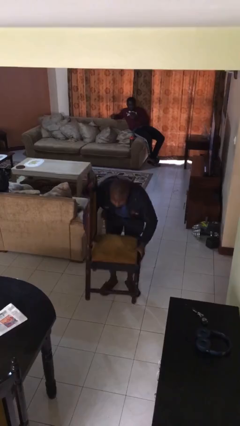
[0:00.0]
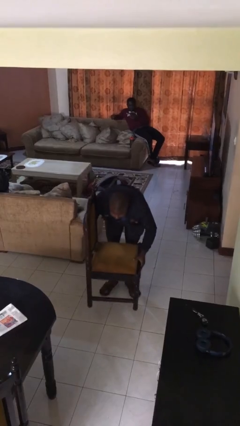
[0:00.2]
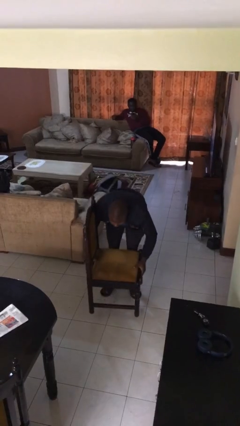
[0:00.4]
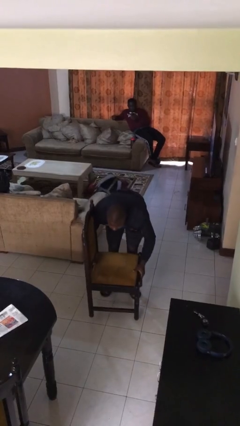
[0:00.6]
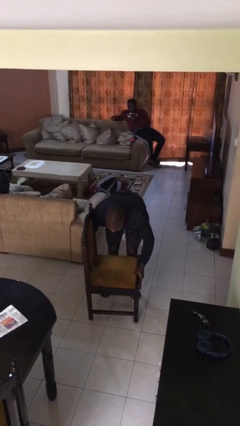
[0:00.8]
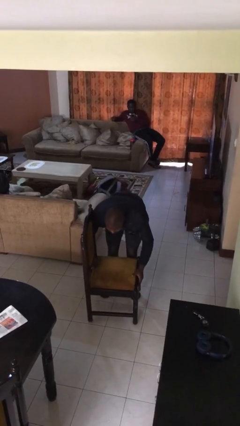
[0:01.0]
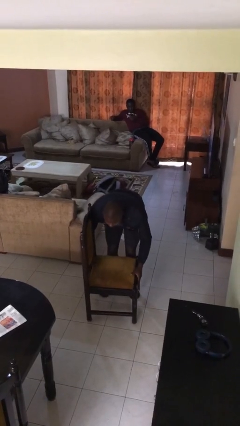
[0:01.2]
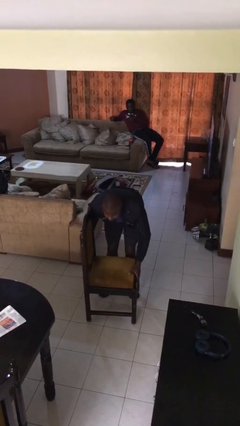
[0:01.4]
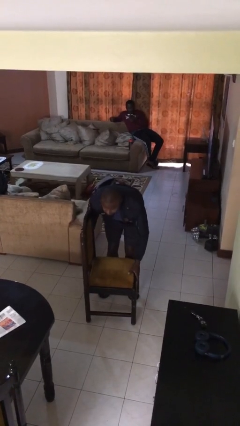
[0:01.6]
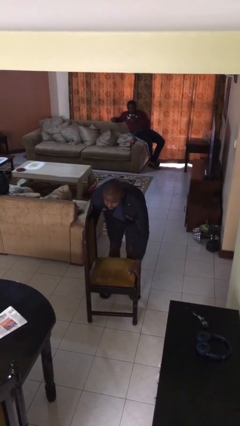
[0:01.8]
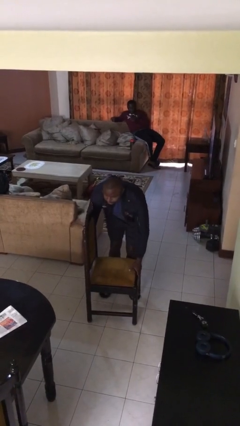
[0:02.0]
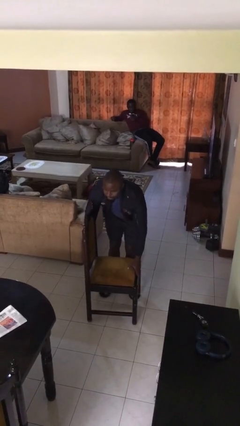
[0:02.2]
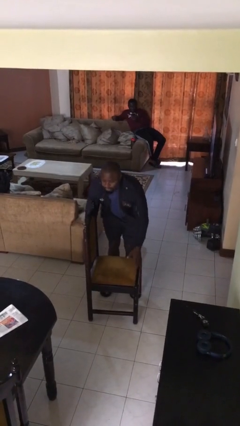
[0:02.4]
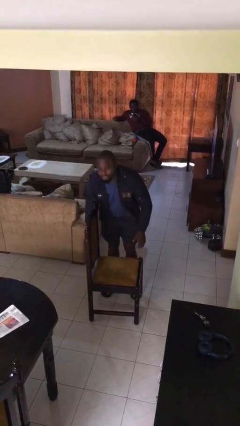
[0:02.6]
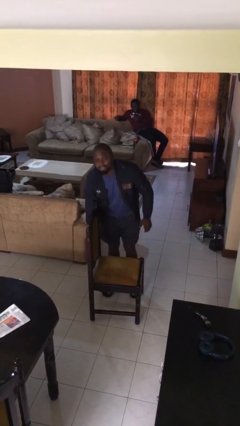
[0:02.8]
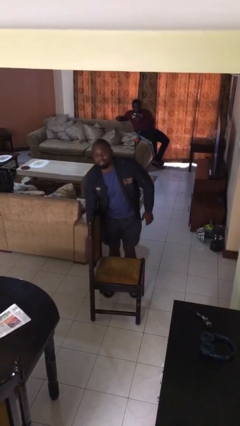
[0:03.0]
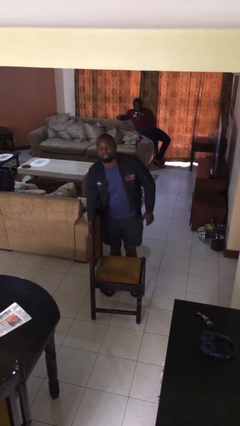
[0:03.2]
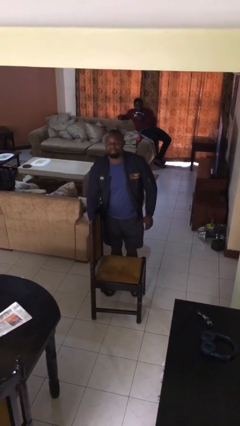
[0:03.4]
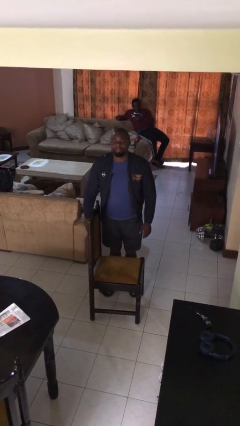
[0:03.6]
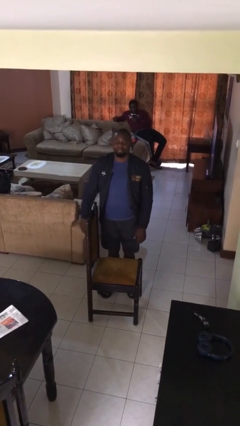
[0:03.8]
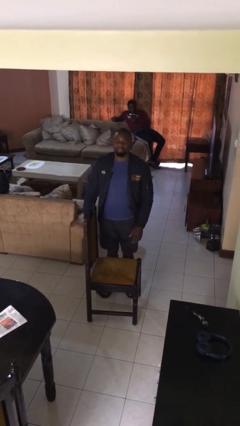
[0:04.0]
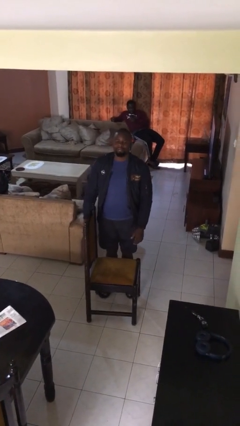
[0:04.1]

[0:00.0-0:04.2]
person puts down object on floor

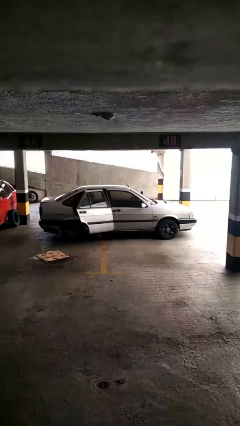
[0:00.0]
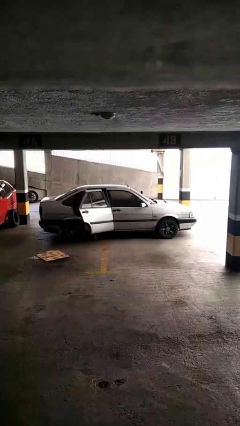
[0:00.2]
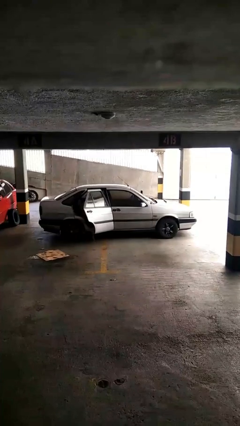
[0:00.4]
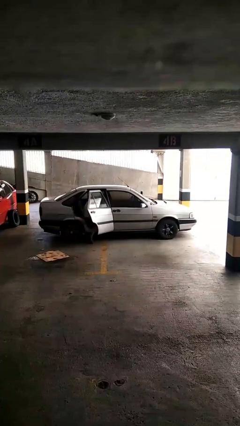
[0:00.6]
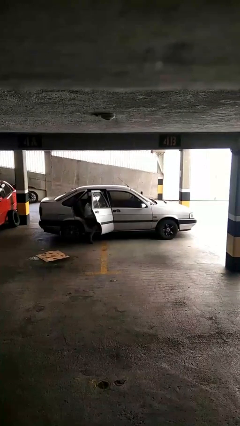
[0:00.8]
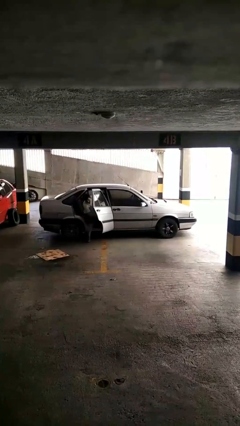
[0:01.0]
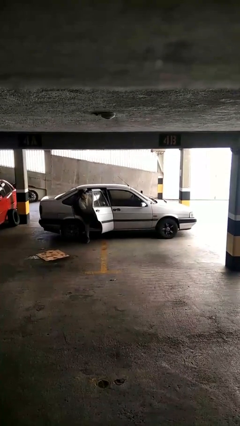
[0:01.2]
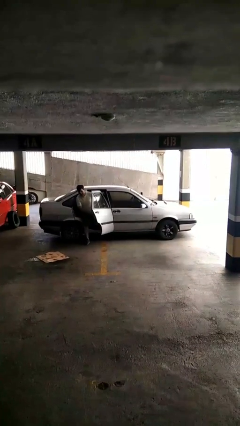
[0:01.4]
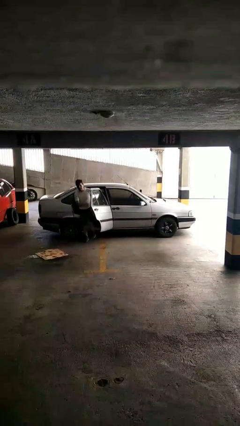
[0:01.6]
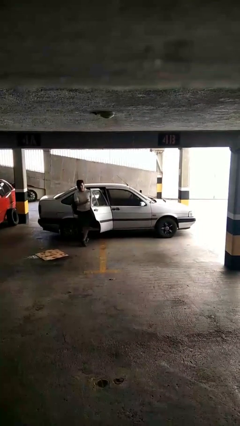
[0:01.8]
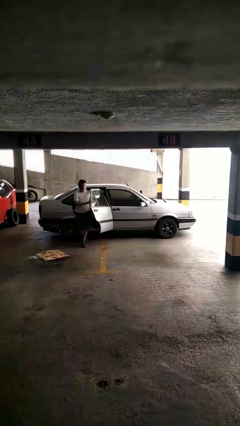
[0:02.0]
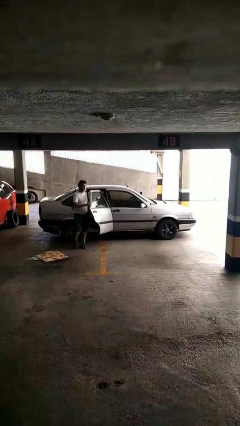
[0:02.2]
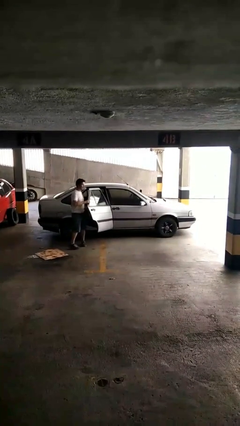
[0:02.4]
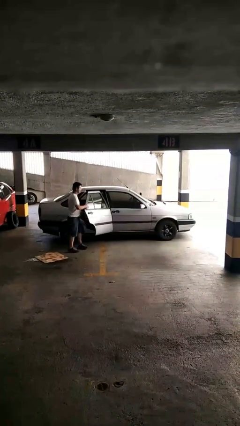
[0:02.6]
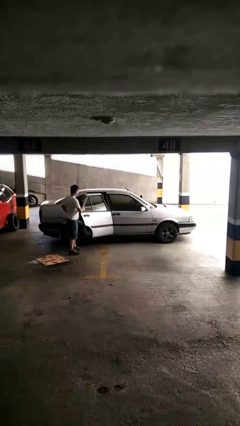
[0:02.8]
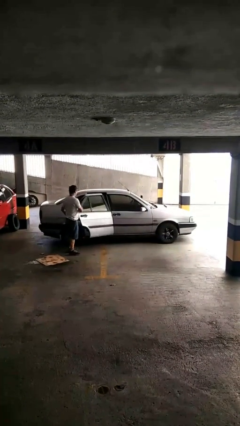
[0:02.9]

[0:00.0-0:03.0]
car drops off person

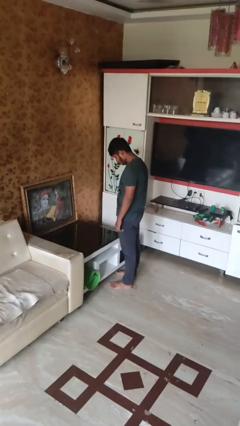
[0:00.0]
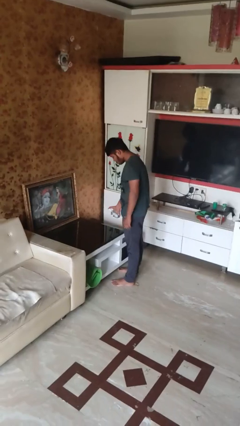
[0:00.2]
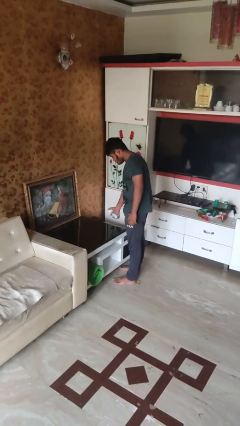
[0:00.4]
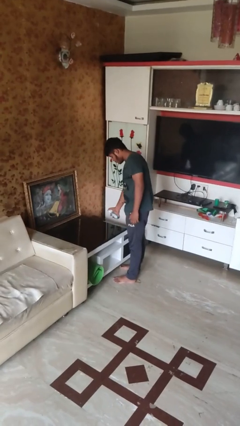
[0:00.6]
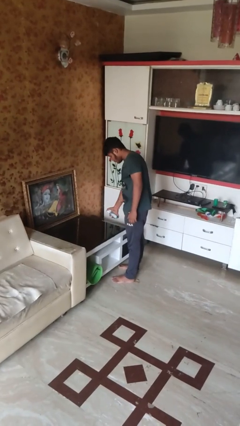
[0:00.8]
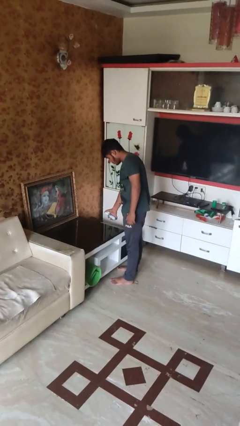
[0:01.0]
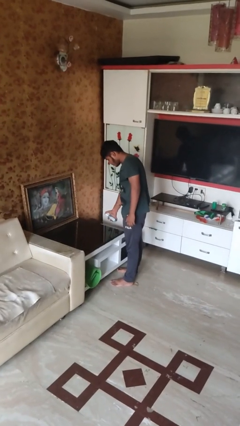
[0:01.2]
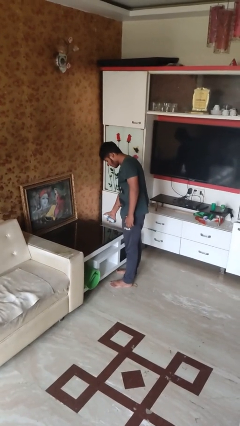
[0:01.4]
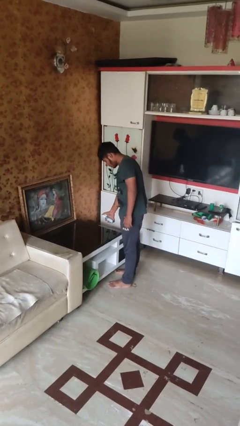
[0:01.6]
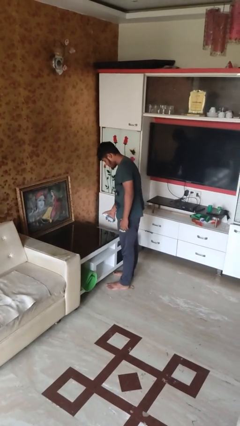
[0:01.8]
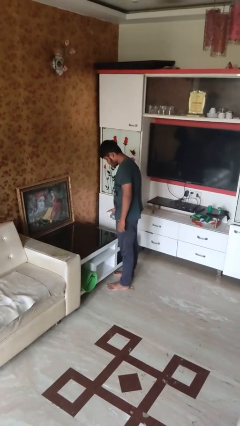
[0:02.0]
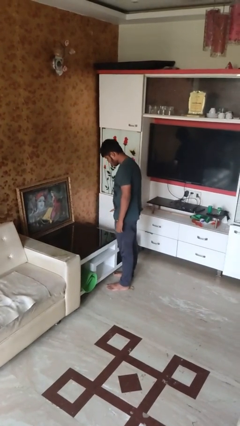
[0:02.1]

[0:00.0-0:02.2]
person sprays from bottle

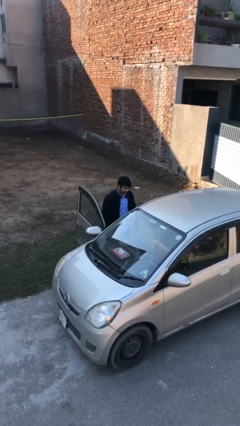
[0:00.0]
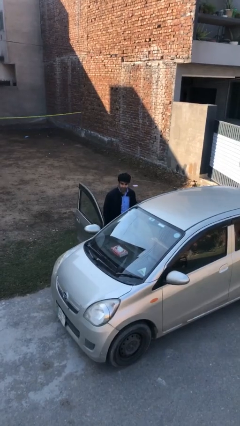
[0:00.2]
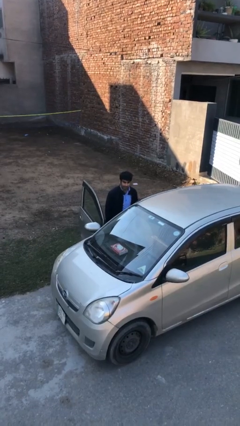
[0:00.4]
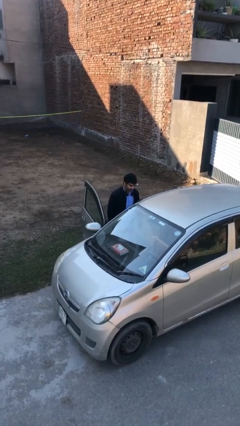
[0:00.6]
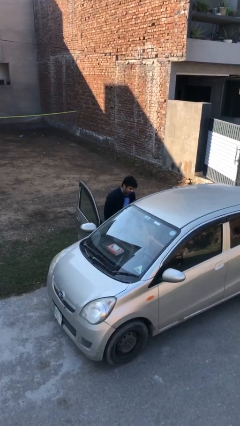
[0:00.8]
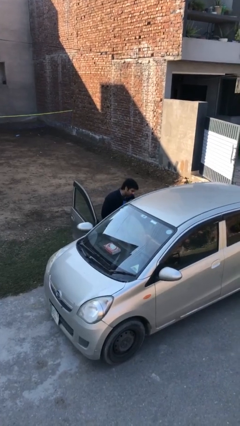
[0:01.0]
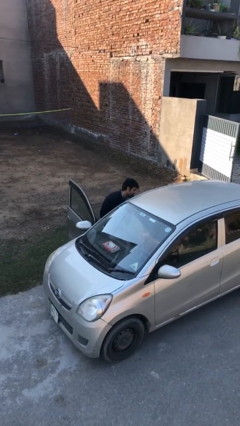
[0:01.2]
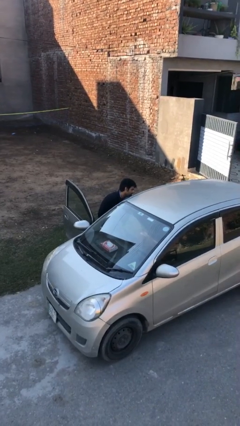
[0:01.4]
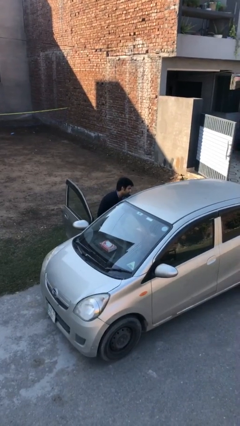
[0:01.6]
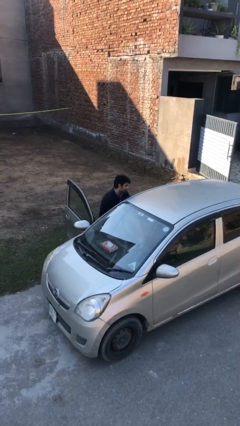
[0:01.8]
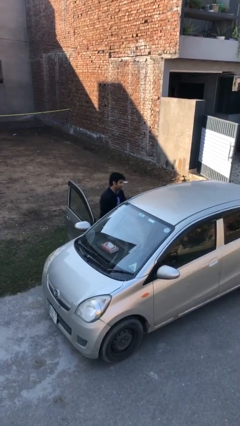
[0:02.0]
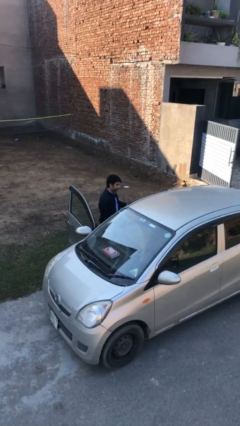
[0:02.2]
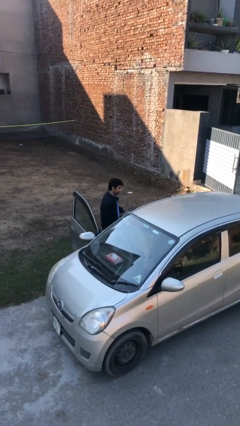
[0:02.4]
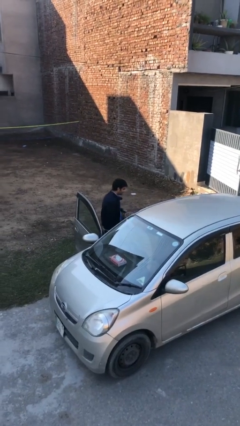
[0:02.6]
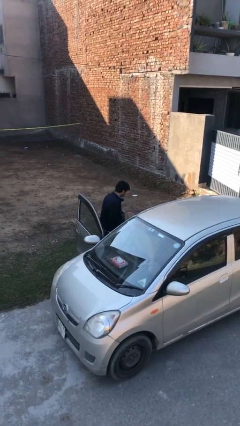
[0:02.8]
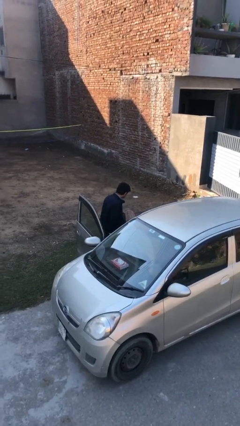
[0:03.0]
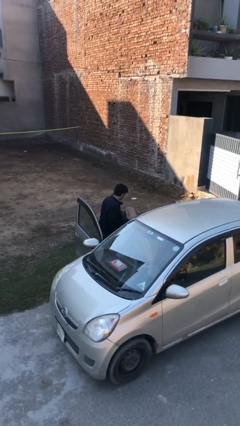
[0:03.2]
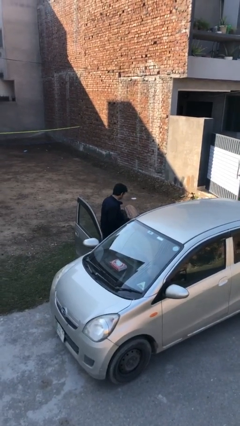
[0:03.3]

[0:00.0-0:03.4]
person unloads car

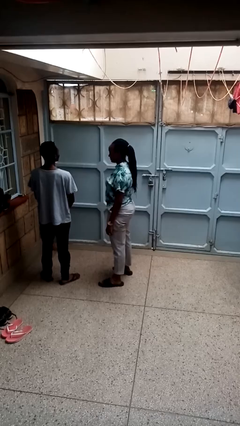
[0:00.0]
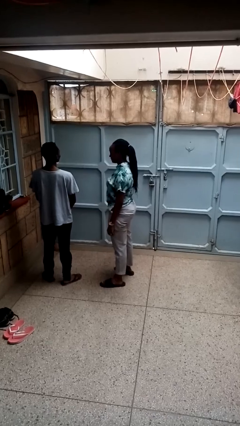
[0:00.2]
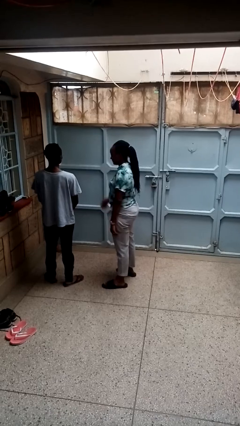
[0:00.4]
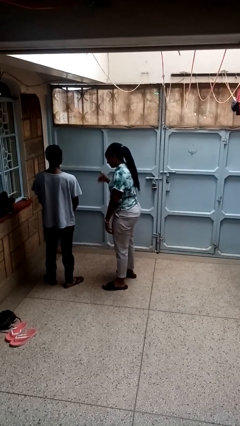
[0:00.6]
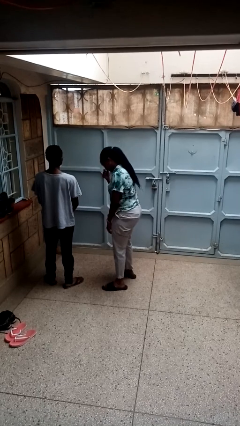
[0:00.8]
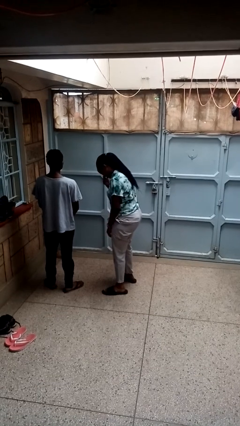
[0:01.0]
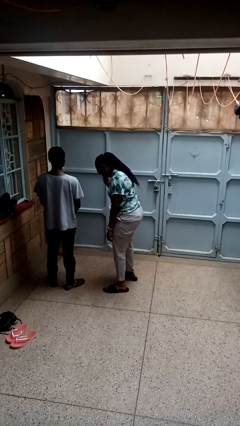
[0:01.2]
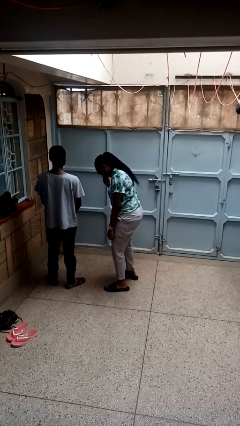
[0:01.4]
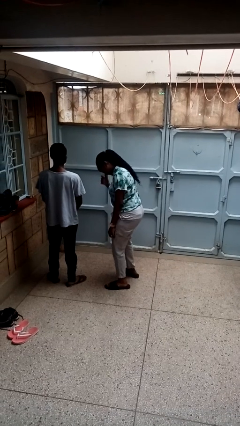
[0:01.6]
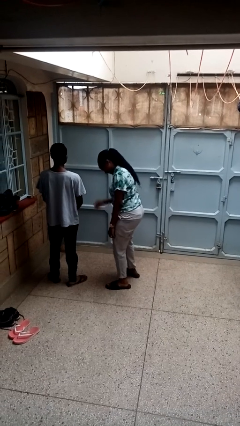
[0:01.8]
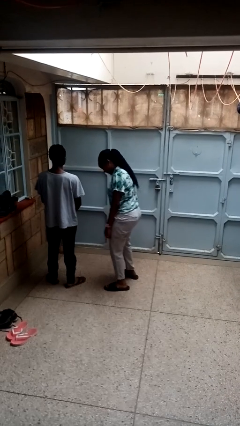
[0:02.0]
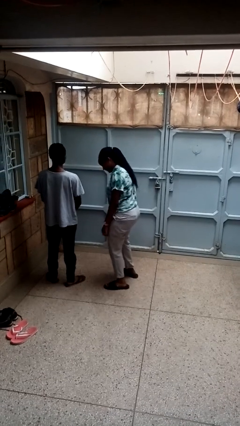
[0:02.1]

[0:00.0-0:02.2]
person laughs with person

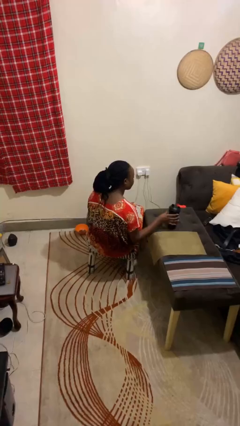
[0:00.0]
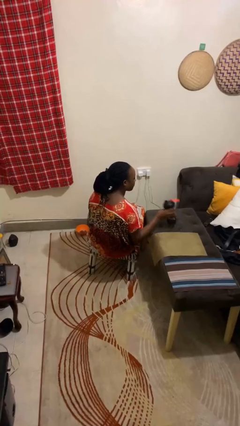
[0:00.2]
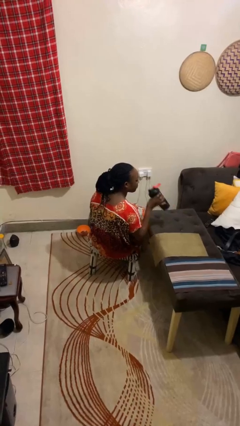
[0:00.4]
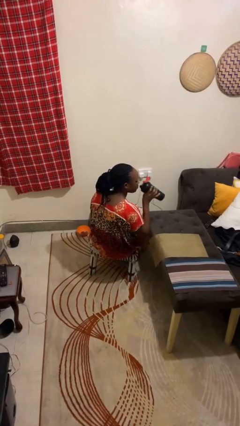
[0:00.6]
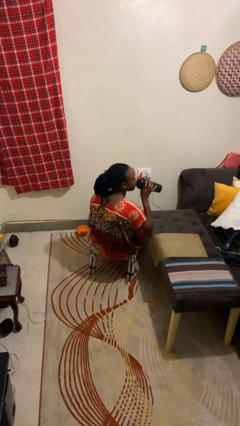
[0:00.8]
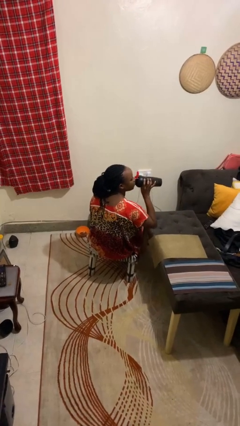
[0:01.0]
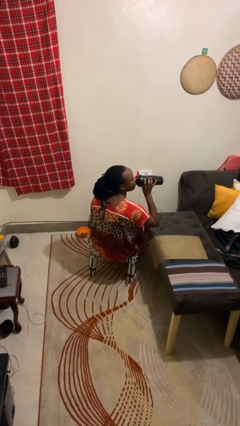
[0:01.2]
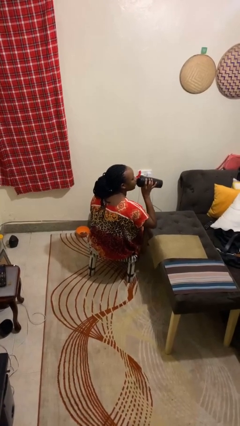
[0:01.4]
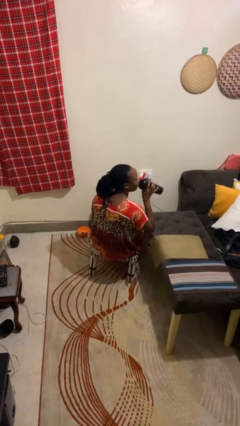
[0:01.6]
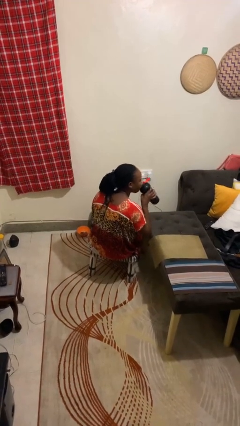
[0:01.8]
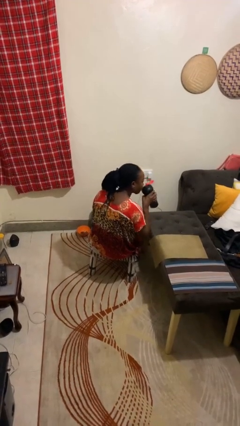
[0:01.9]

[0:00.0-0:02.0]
person drinks from cup

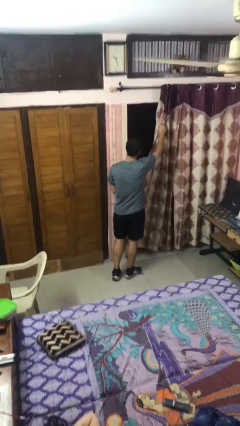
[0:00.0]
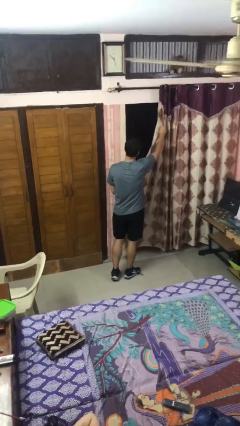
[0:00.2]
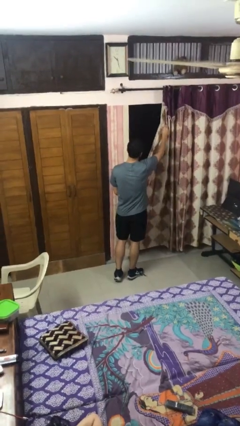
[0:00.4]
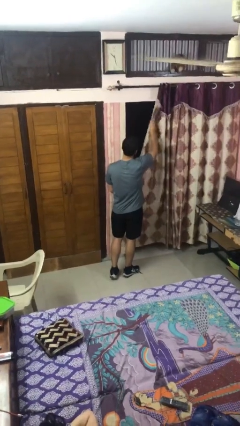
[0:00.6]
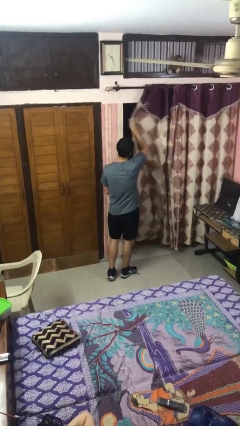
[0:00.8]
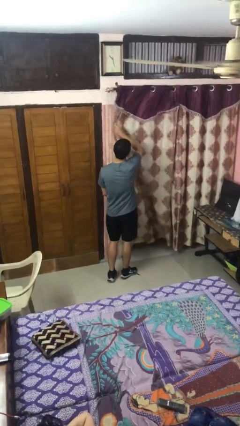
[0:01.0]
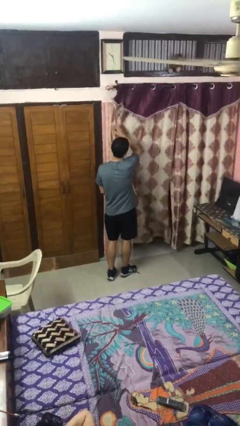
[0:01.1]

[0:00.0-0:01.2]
person closes curtains
